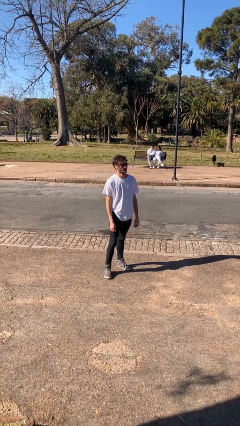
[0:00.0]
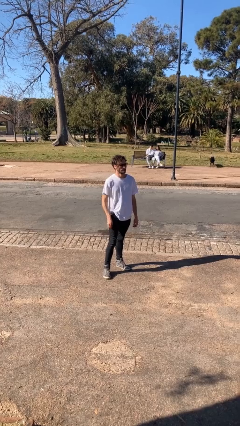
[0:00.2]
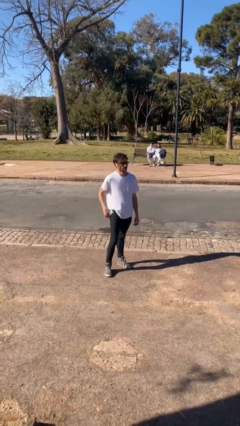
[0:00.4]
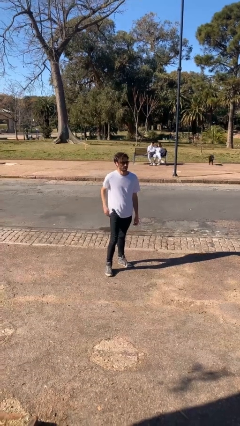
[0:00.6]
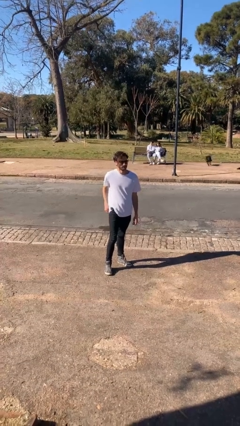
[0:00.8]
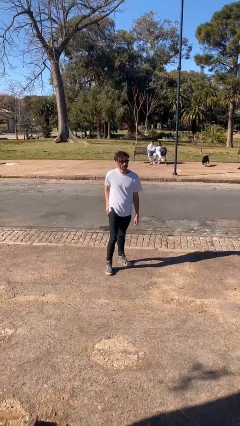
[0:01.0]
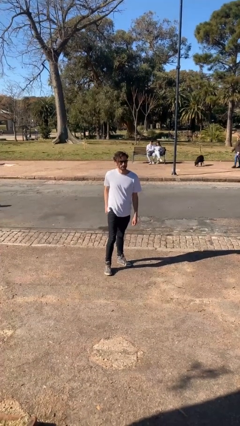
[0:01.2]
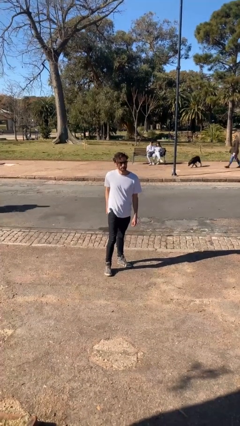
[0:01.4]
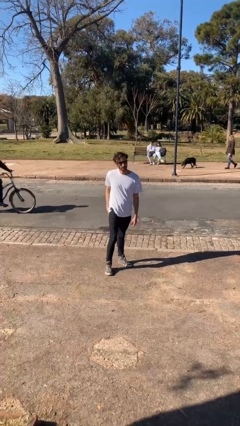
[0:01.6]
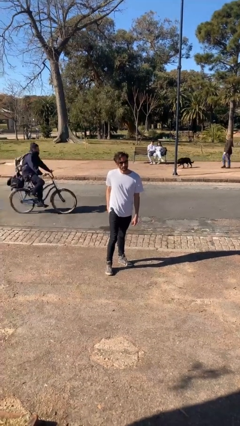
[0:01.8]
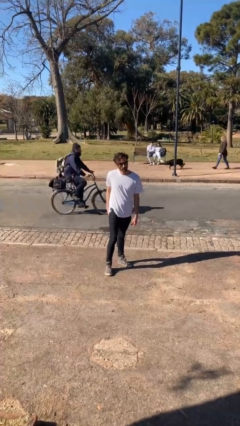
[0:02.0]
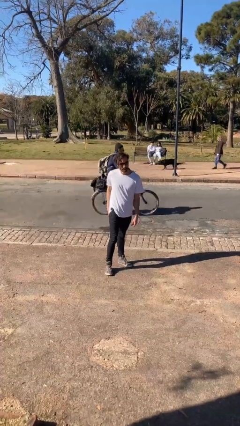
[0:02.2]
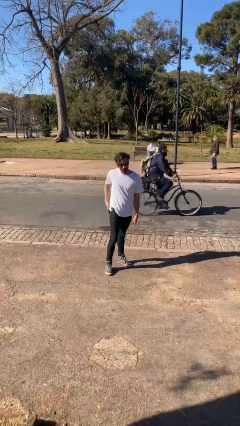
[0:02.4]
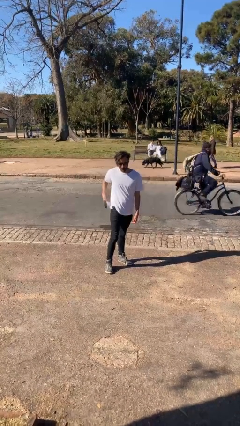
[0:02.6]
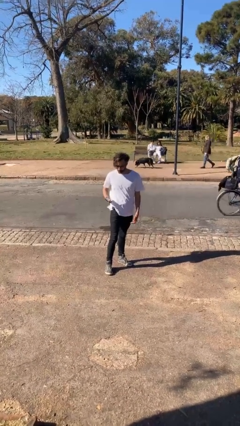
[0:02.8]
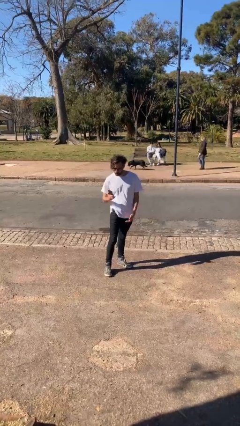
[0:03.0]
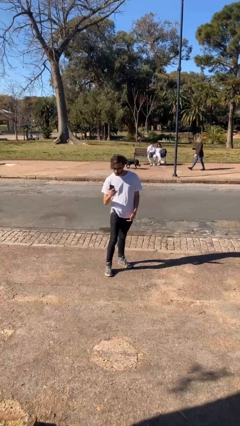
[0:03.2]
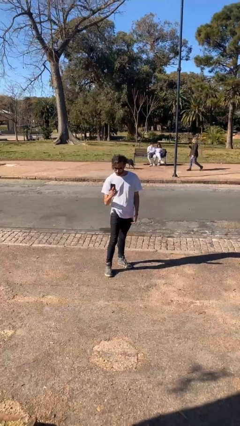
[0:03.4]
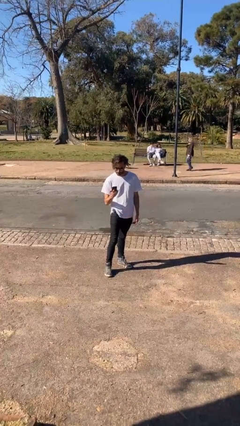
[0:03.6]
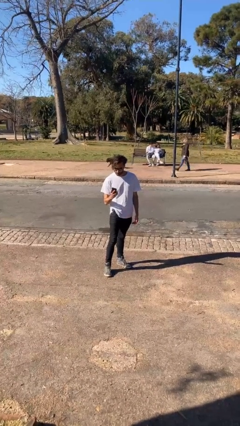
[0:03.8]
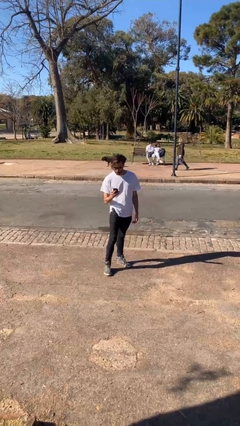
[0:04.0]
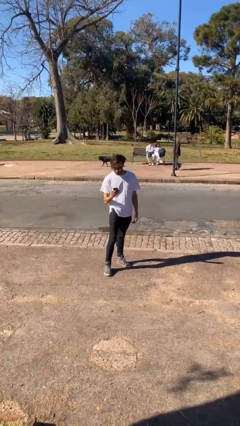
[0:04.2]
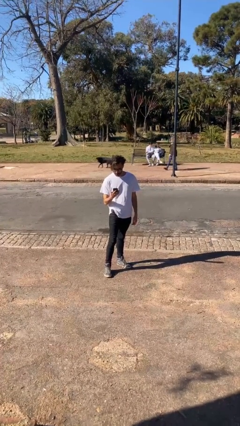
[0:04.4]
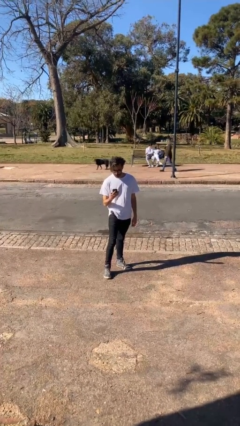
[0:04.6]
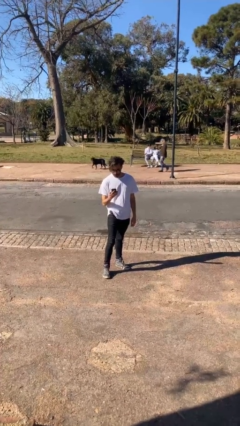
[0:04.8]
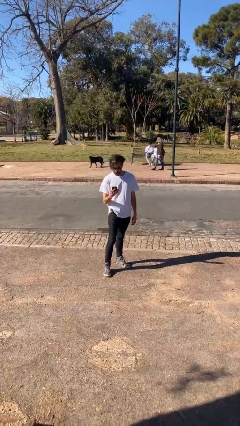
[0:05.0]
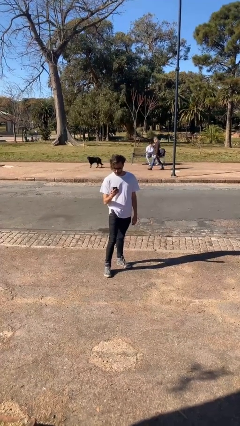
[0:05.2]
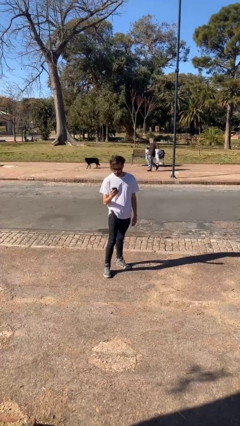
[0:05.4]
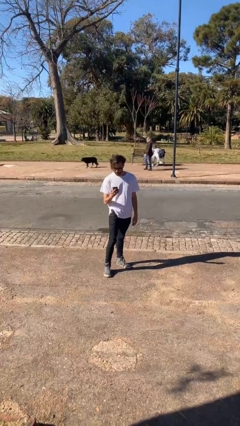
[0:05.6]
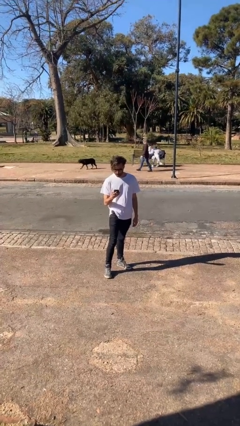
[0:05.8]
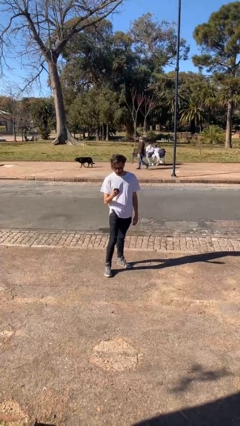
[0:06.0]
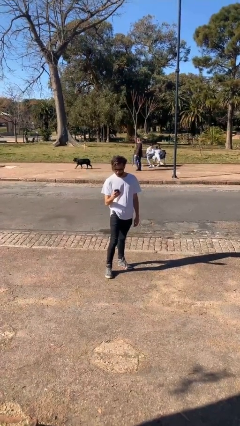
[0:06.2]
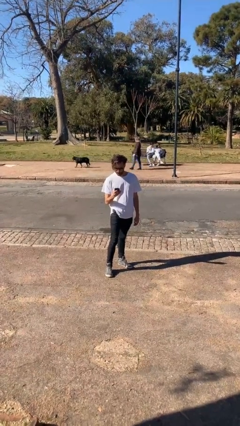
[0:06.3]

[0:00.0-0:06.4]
person takes phone from pocket

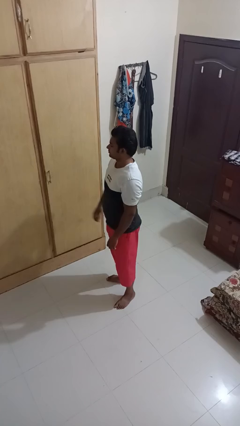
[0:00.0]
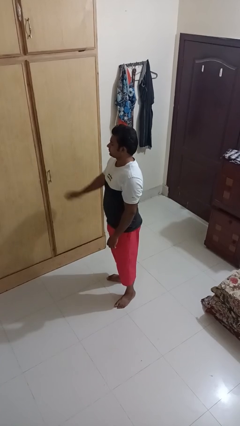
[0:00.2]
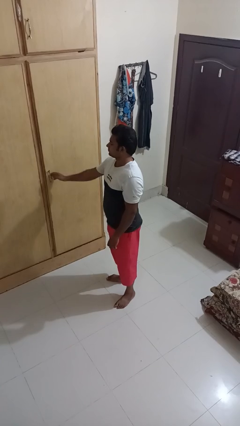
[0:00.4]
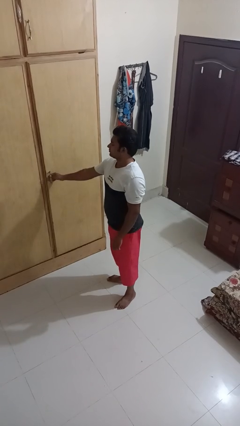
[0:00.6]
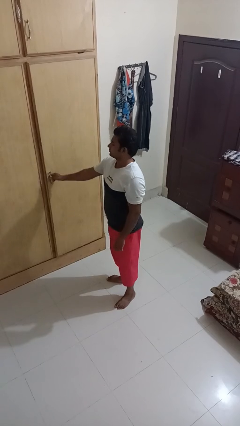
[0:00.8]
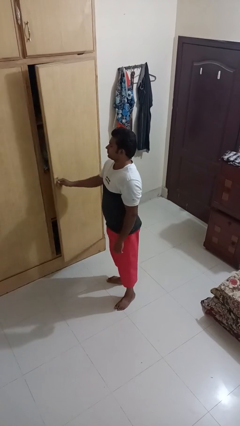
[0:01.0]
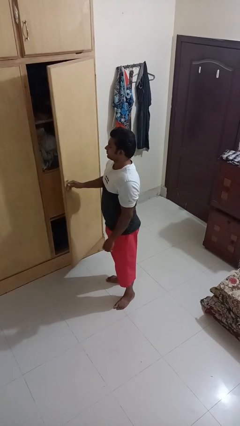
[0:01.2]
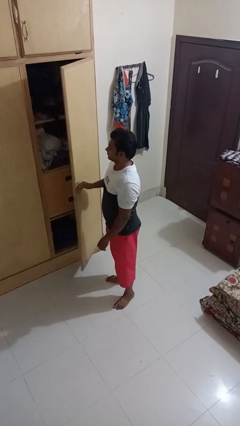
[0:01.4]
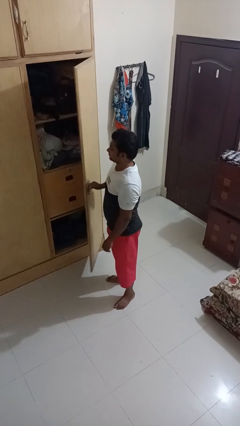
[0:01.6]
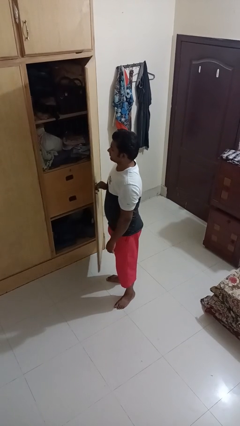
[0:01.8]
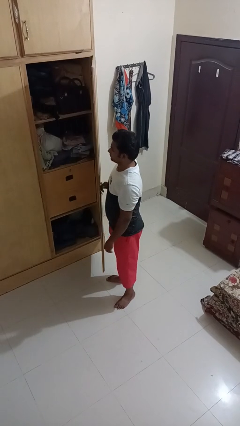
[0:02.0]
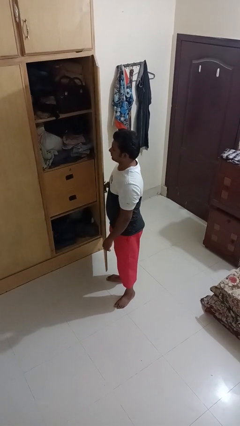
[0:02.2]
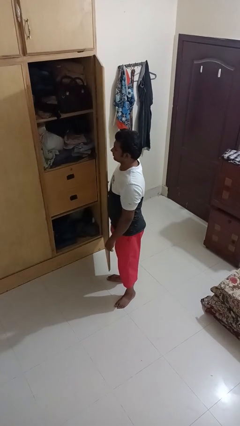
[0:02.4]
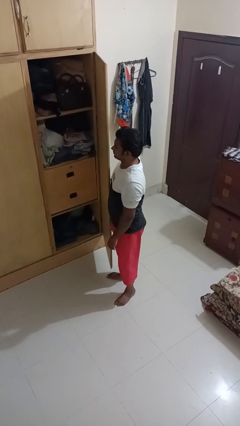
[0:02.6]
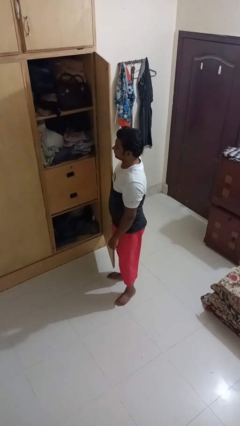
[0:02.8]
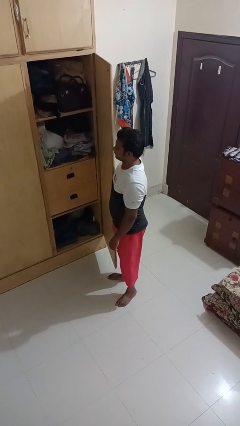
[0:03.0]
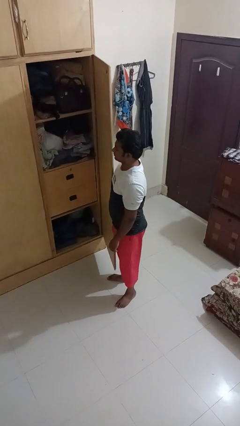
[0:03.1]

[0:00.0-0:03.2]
person opens closet door

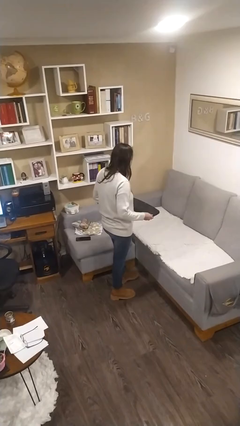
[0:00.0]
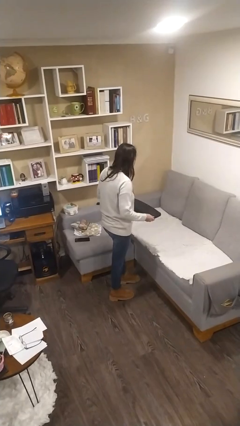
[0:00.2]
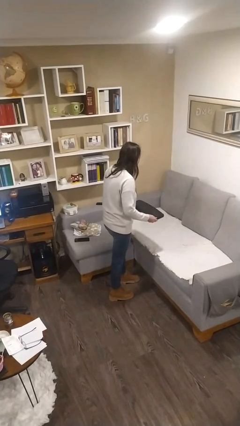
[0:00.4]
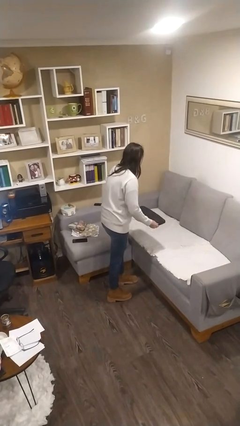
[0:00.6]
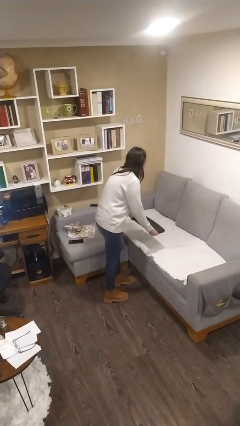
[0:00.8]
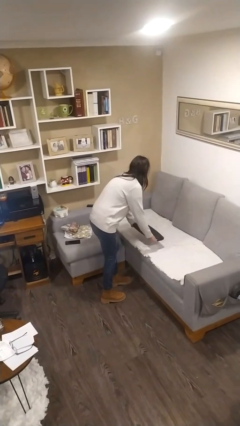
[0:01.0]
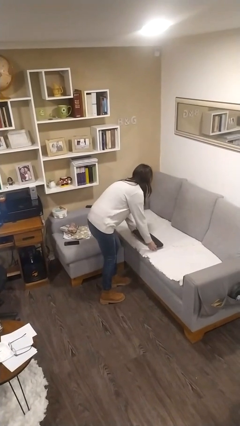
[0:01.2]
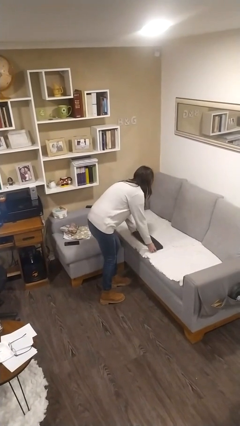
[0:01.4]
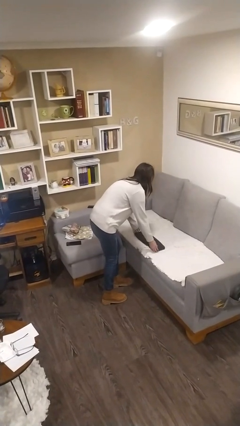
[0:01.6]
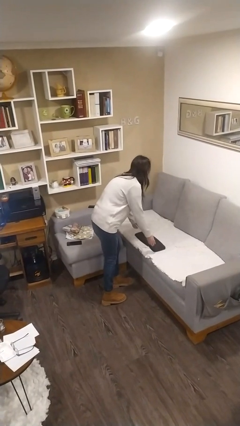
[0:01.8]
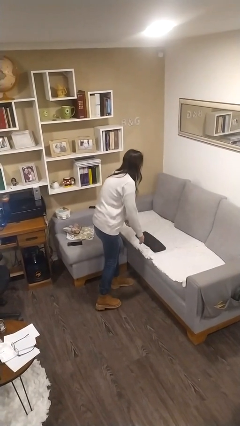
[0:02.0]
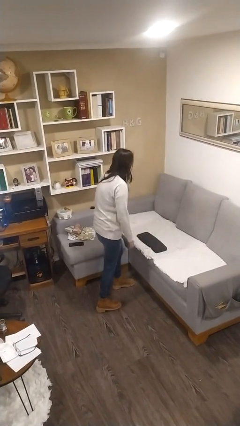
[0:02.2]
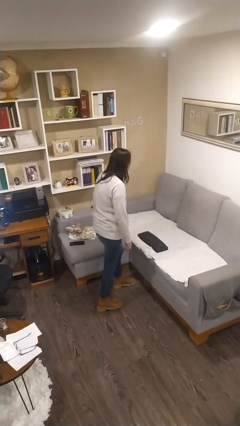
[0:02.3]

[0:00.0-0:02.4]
person puts down object on couch

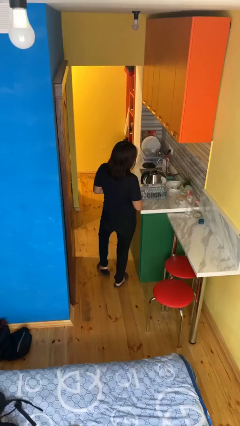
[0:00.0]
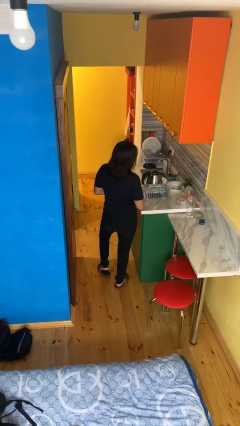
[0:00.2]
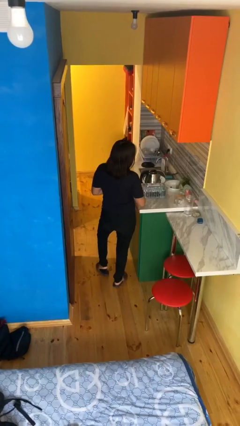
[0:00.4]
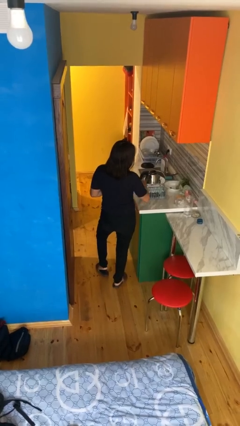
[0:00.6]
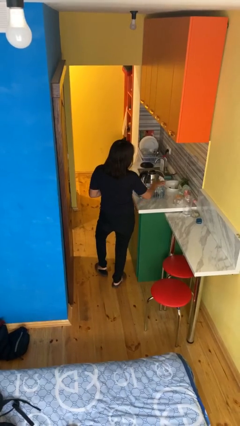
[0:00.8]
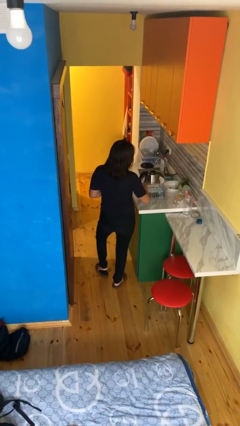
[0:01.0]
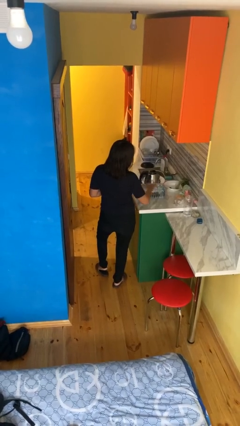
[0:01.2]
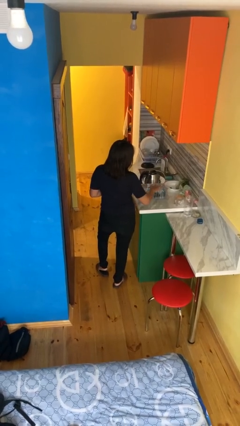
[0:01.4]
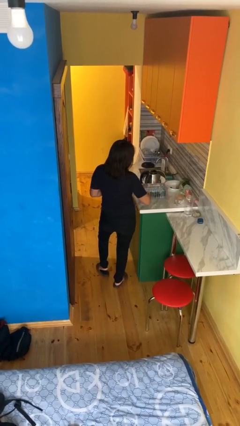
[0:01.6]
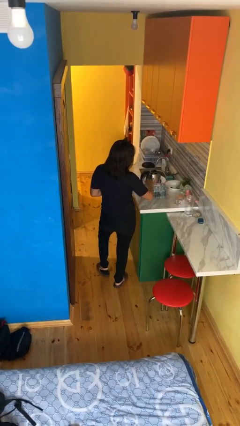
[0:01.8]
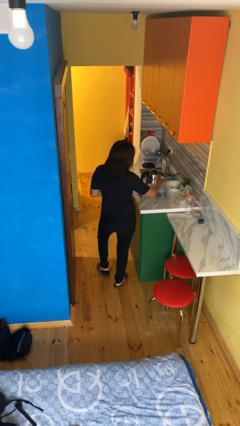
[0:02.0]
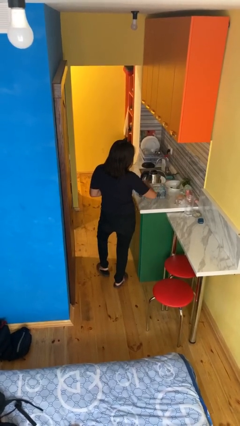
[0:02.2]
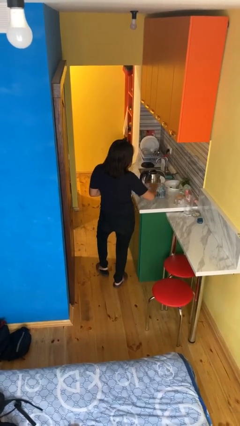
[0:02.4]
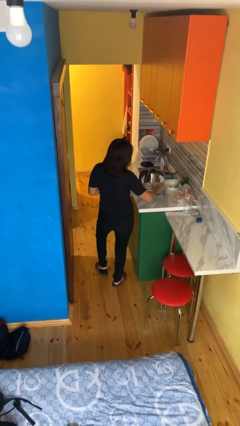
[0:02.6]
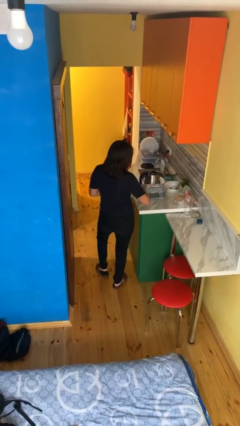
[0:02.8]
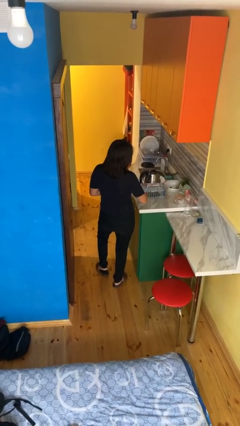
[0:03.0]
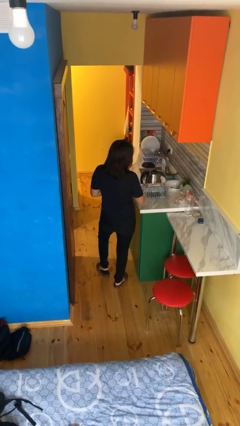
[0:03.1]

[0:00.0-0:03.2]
person waves hand over object

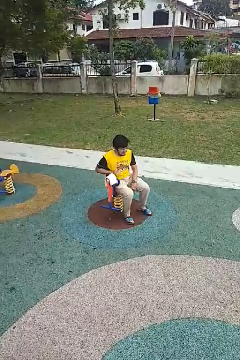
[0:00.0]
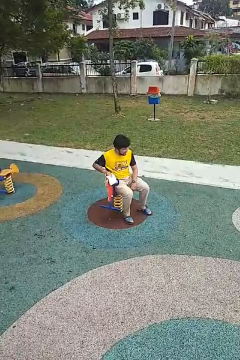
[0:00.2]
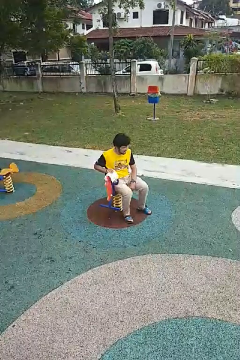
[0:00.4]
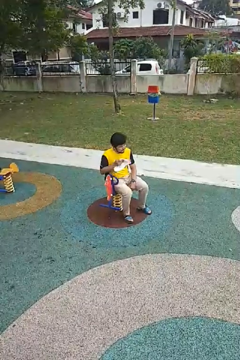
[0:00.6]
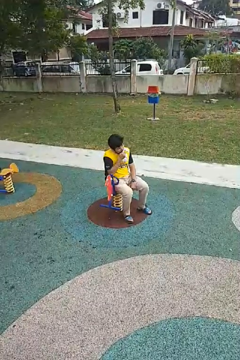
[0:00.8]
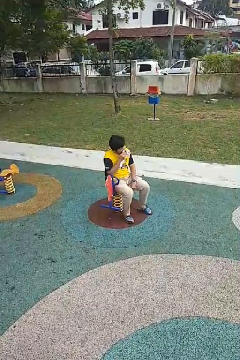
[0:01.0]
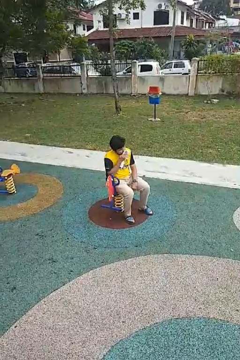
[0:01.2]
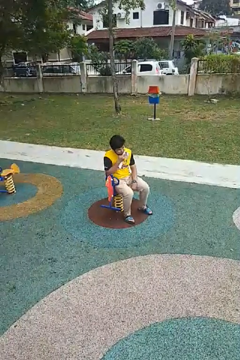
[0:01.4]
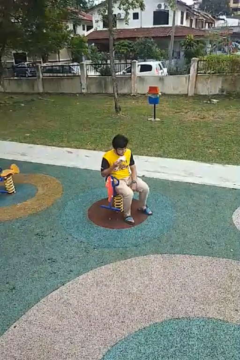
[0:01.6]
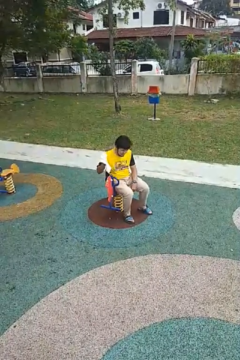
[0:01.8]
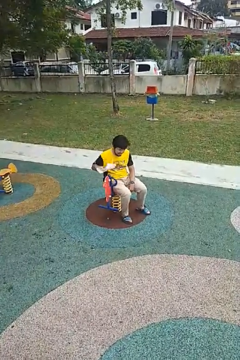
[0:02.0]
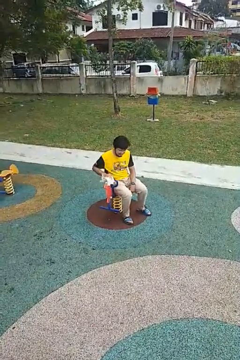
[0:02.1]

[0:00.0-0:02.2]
person wipes mouth with napkin

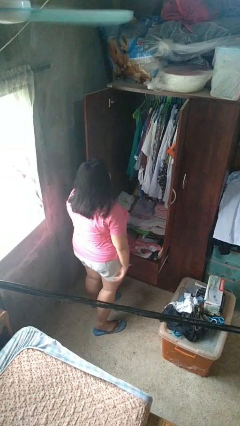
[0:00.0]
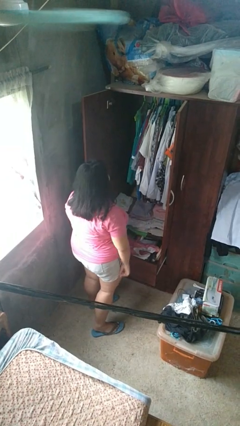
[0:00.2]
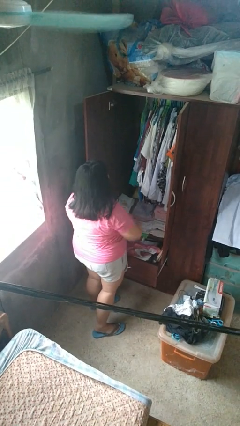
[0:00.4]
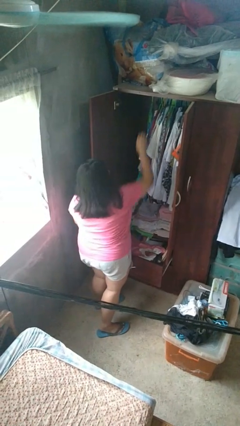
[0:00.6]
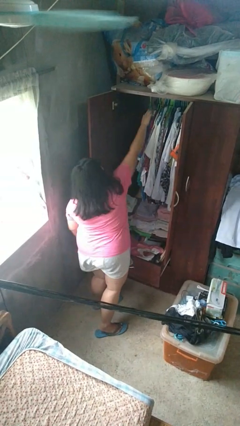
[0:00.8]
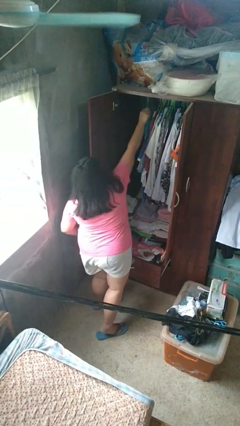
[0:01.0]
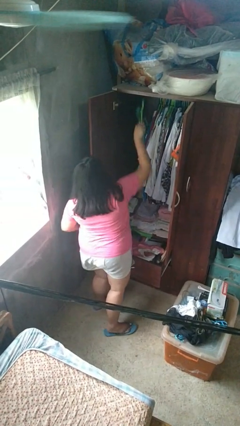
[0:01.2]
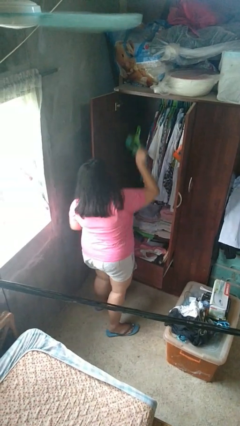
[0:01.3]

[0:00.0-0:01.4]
person takes clothes from closet
